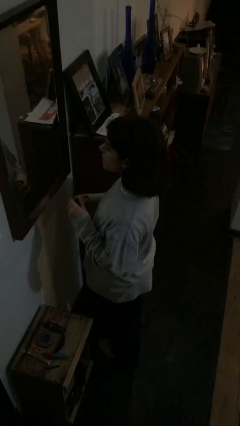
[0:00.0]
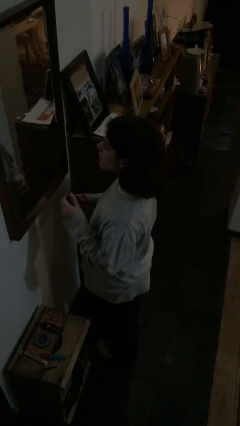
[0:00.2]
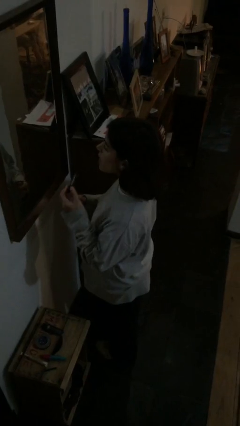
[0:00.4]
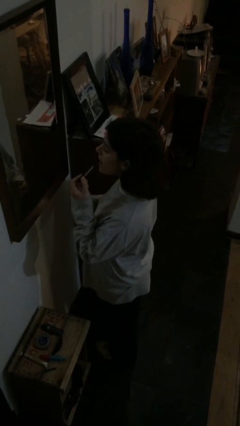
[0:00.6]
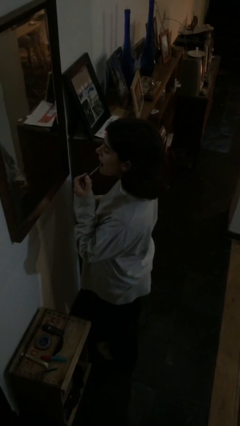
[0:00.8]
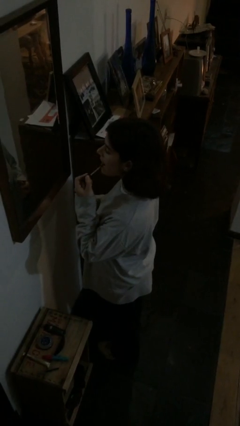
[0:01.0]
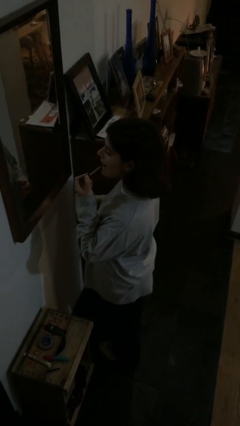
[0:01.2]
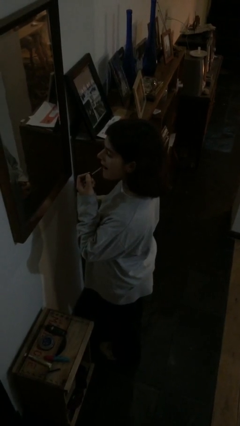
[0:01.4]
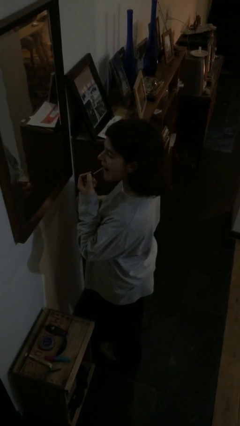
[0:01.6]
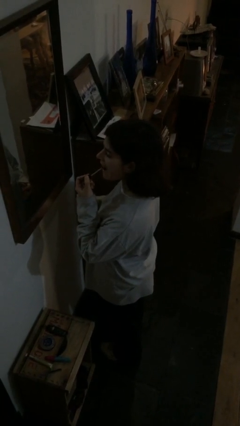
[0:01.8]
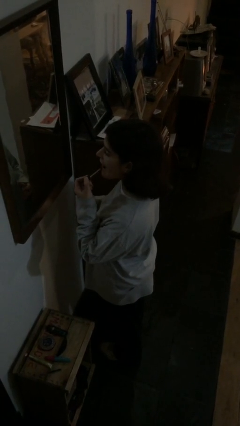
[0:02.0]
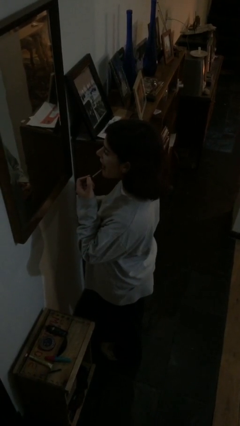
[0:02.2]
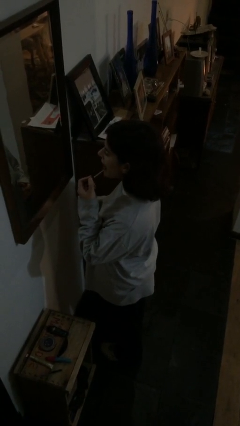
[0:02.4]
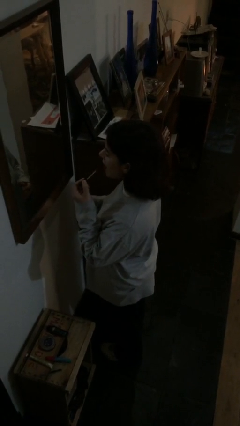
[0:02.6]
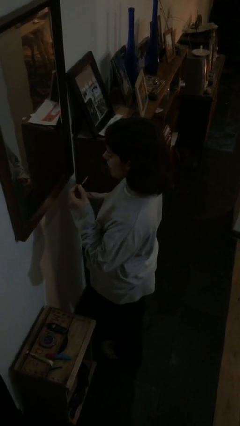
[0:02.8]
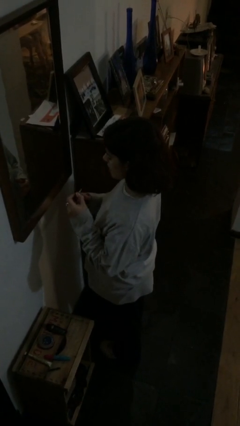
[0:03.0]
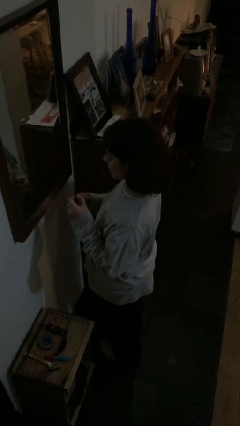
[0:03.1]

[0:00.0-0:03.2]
person applies lip makeup

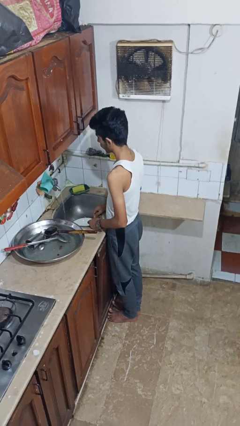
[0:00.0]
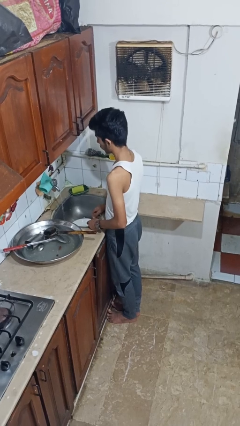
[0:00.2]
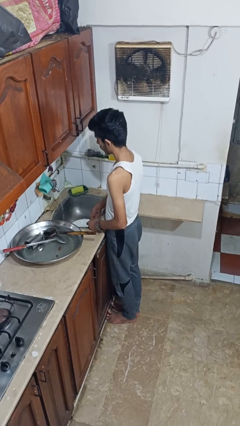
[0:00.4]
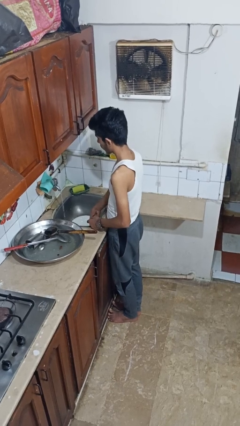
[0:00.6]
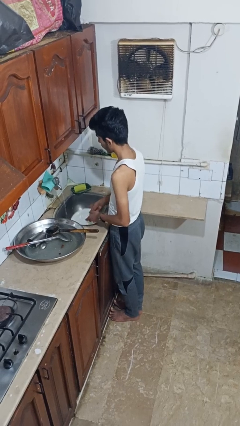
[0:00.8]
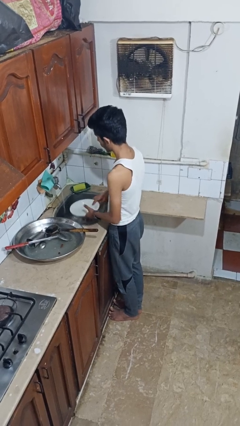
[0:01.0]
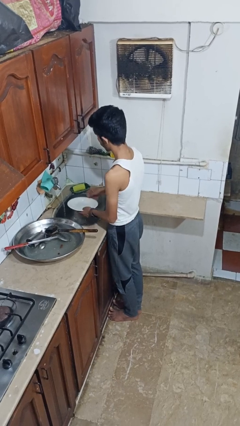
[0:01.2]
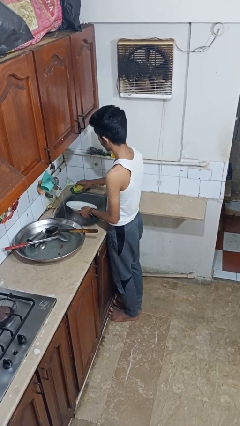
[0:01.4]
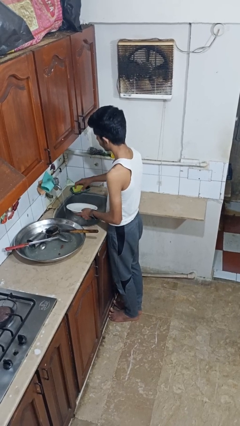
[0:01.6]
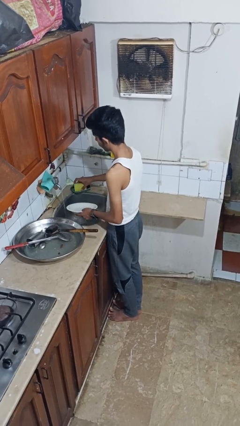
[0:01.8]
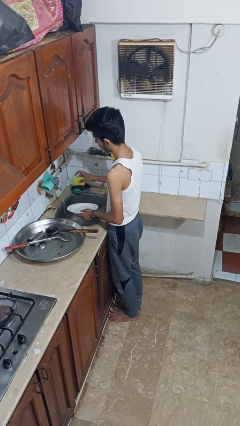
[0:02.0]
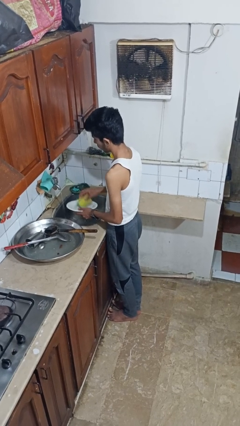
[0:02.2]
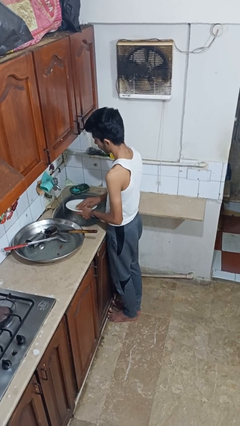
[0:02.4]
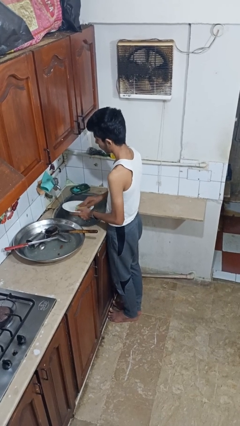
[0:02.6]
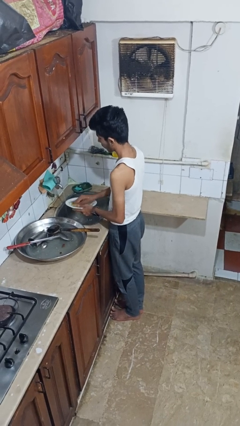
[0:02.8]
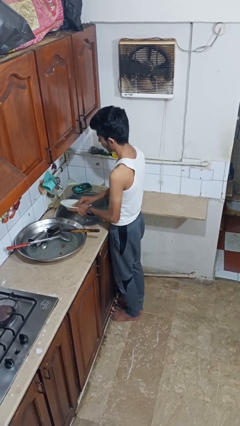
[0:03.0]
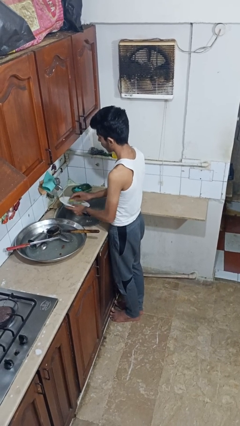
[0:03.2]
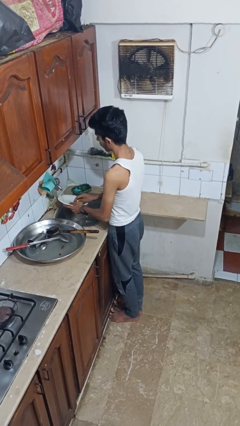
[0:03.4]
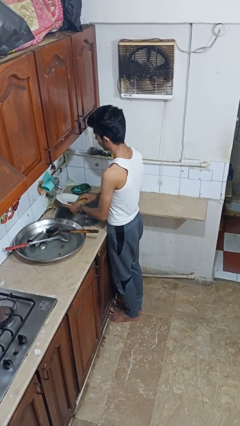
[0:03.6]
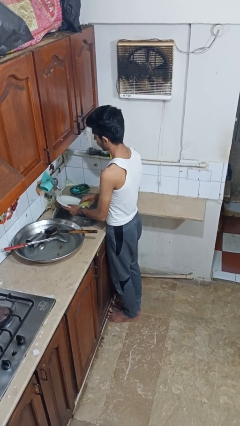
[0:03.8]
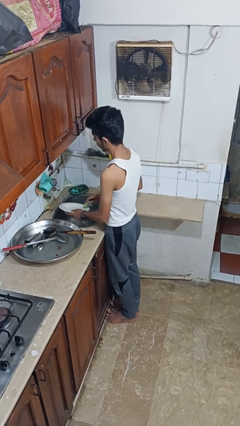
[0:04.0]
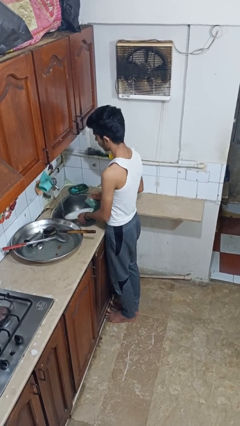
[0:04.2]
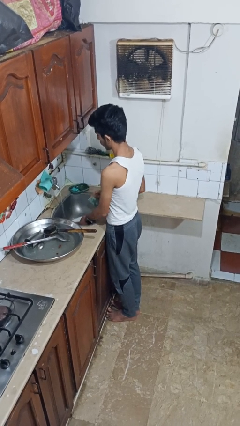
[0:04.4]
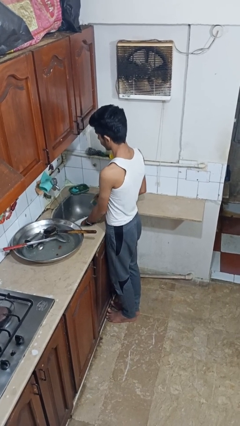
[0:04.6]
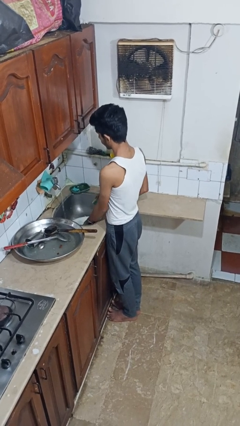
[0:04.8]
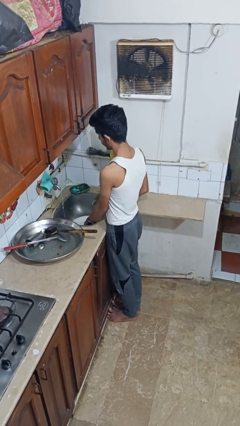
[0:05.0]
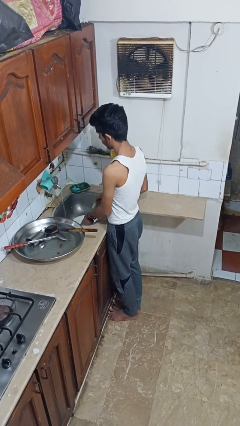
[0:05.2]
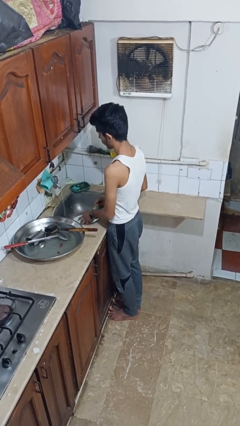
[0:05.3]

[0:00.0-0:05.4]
person washes dish

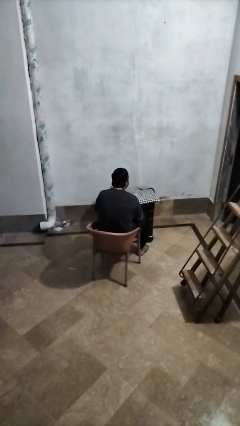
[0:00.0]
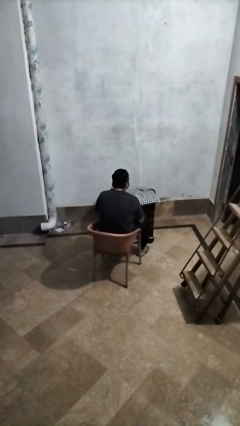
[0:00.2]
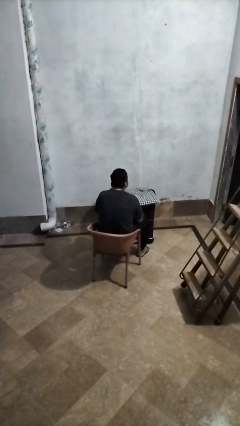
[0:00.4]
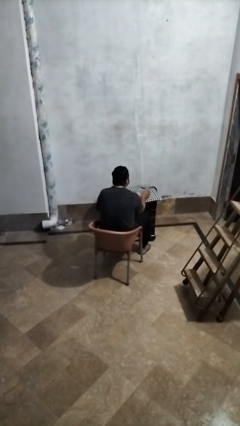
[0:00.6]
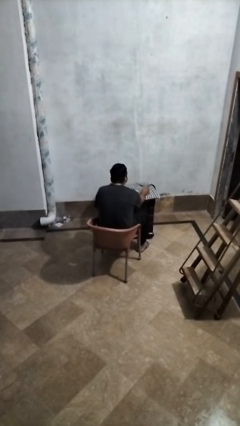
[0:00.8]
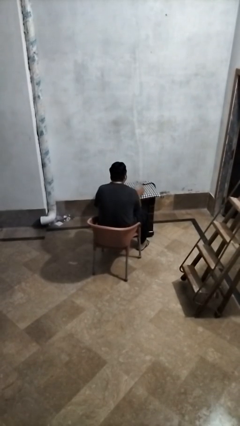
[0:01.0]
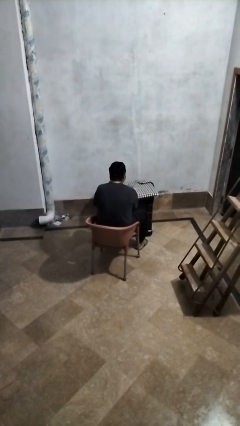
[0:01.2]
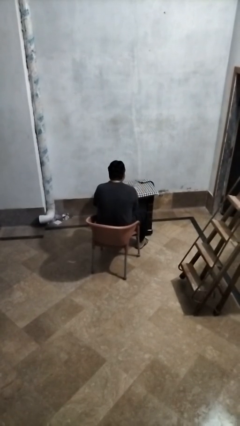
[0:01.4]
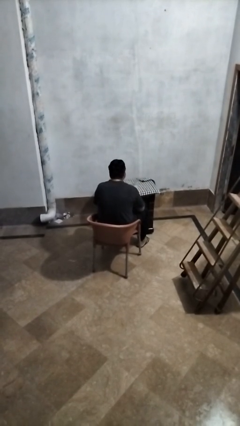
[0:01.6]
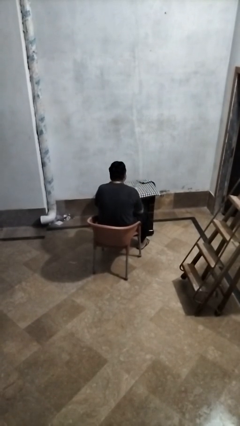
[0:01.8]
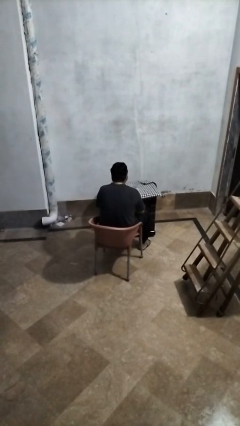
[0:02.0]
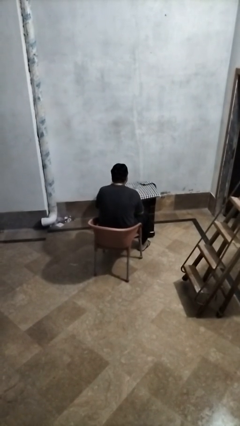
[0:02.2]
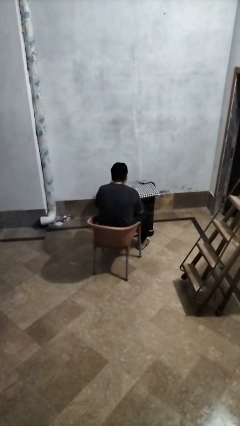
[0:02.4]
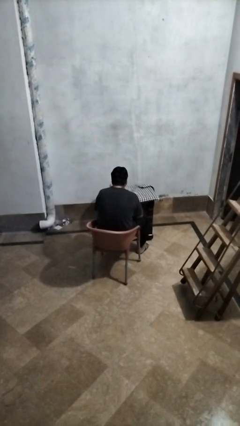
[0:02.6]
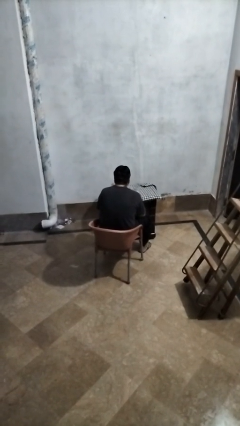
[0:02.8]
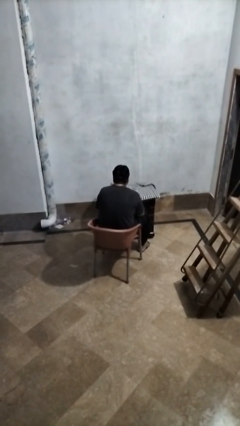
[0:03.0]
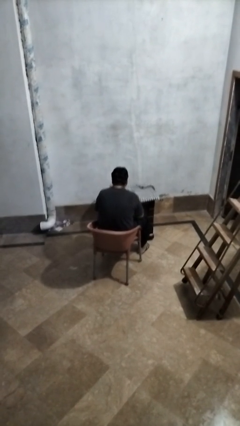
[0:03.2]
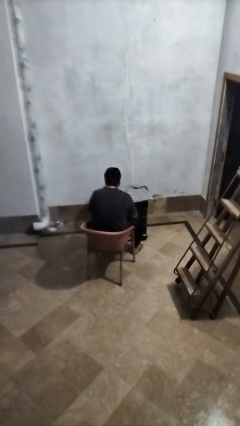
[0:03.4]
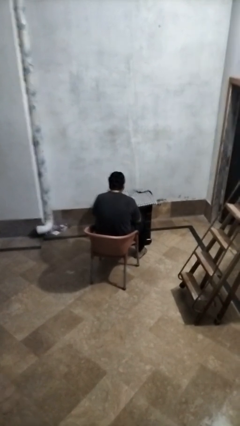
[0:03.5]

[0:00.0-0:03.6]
person knocks over glass

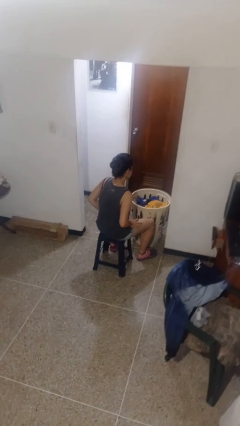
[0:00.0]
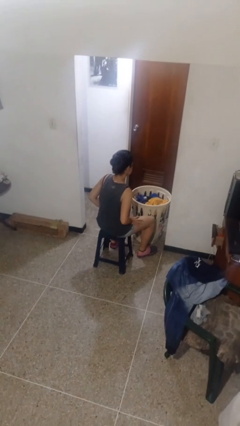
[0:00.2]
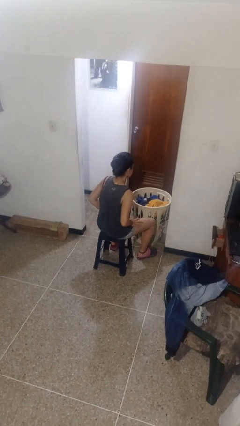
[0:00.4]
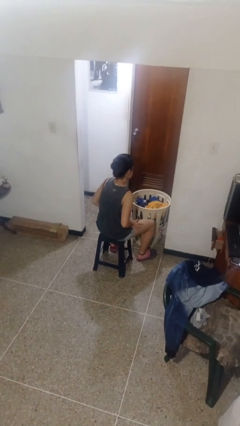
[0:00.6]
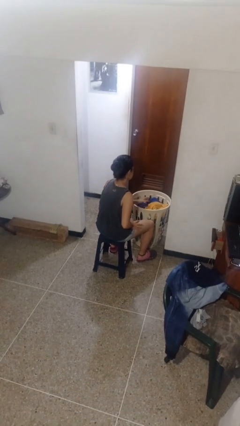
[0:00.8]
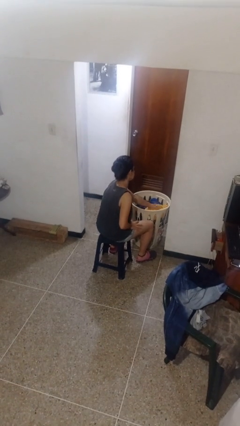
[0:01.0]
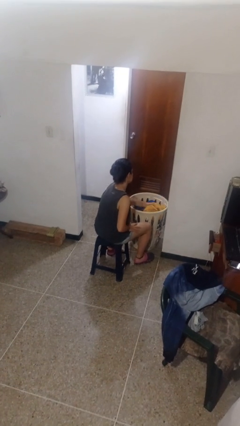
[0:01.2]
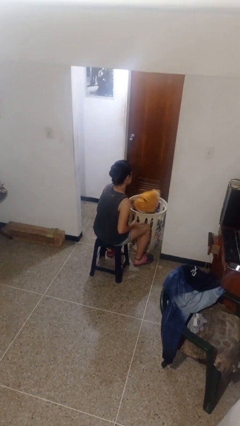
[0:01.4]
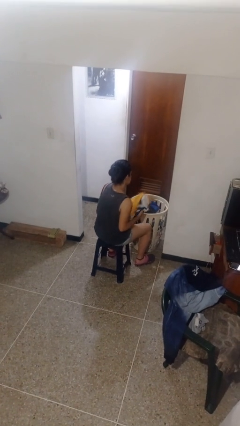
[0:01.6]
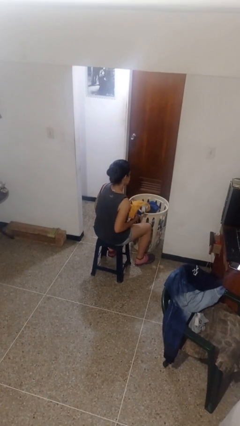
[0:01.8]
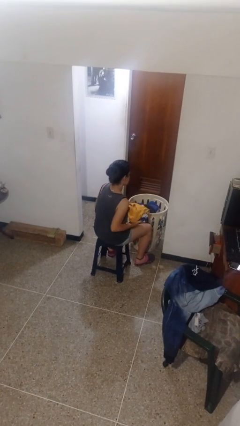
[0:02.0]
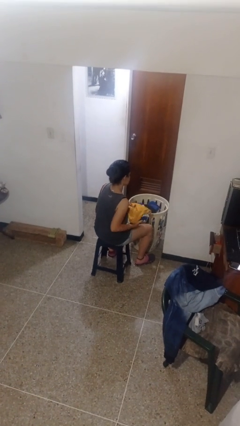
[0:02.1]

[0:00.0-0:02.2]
person takes object from basket

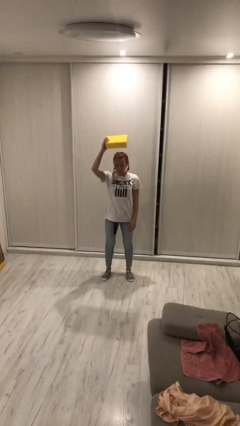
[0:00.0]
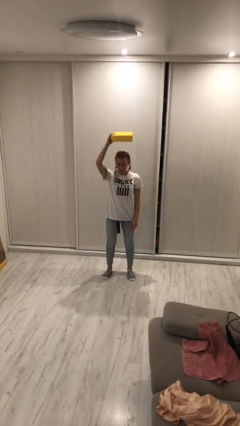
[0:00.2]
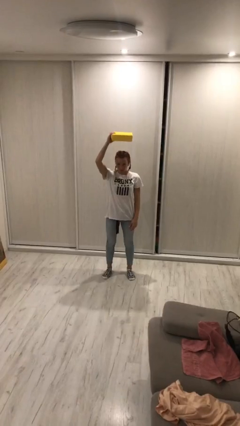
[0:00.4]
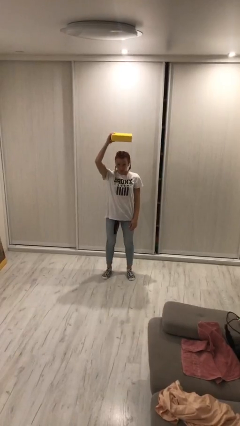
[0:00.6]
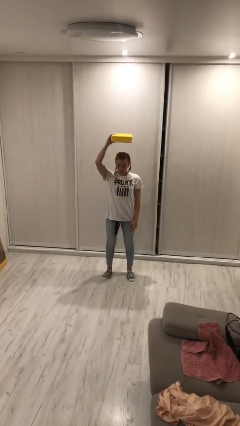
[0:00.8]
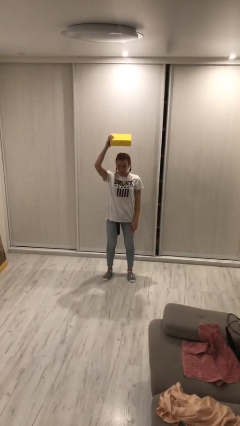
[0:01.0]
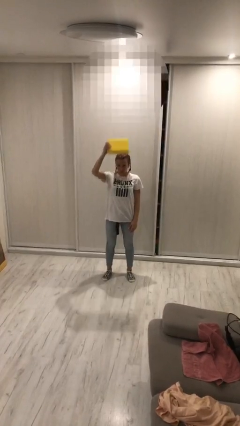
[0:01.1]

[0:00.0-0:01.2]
person holds object above head

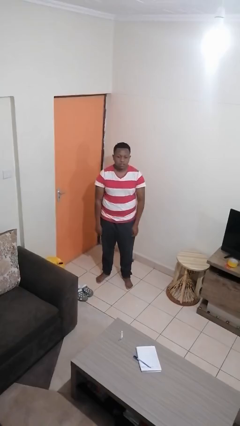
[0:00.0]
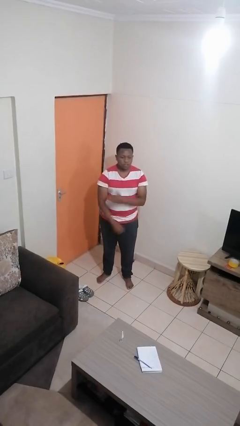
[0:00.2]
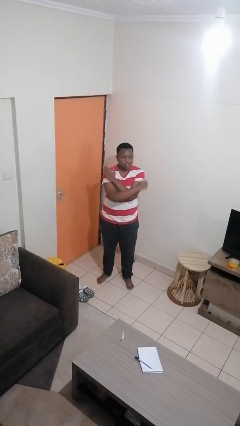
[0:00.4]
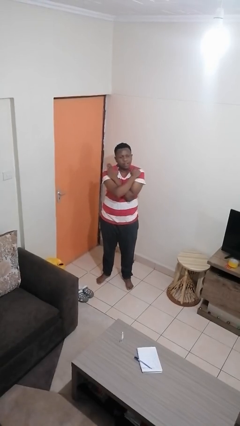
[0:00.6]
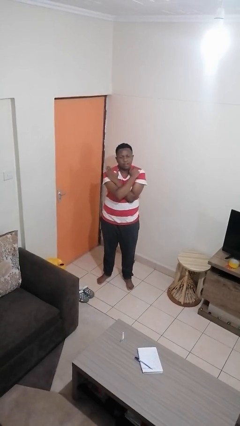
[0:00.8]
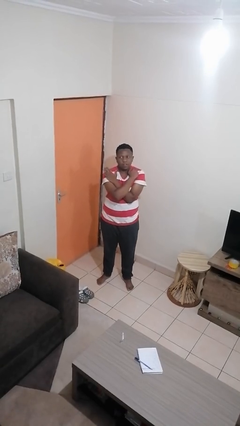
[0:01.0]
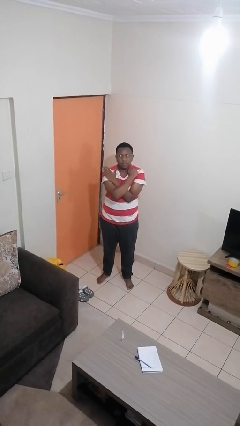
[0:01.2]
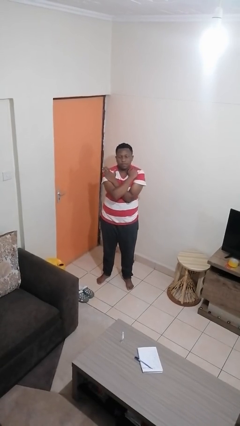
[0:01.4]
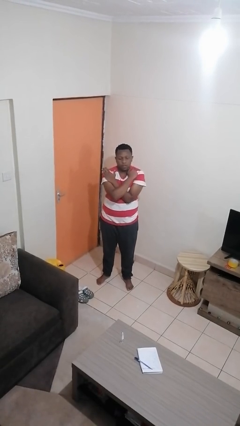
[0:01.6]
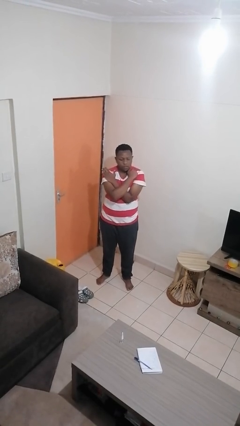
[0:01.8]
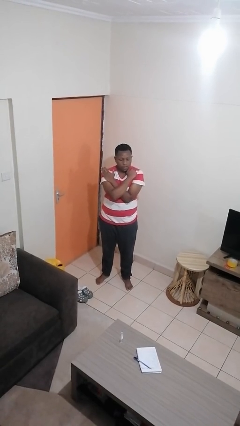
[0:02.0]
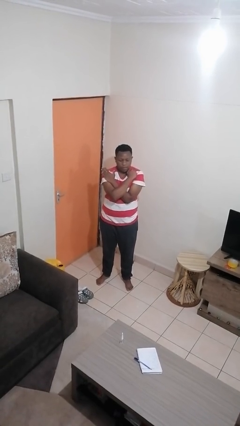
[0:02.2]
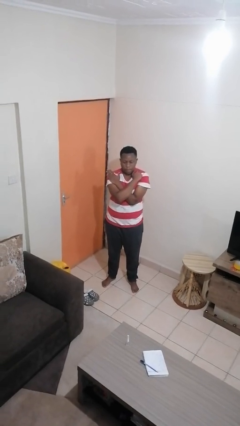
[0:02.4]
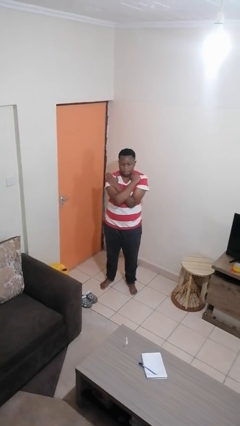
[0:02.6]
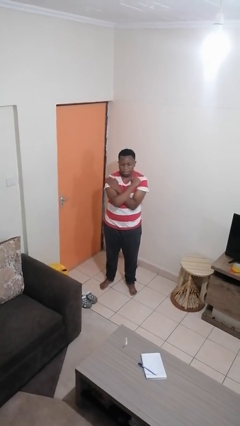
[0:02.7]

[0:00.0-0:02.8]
person gestures arms x
